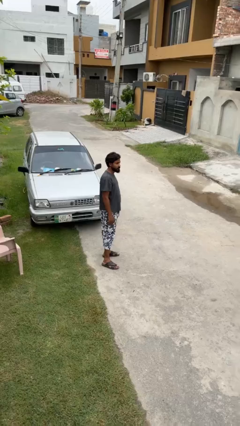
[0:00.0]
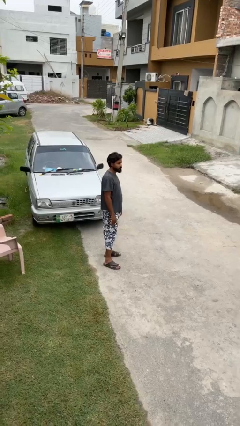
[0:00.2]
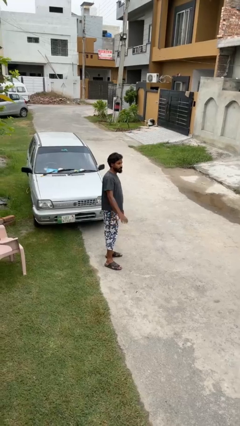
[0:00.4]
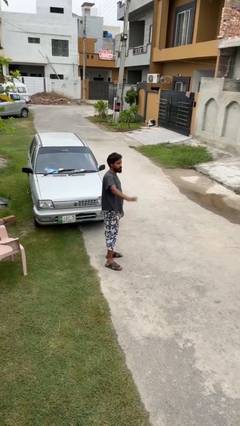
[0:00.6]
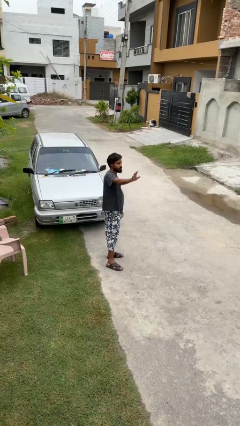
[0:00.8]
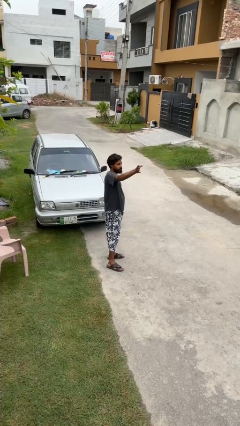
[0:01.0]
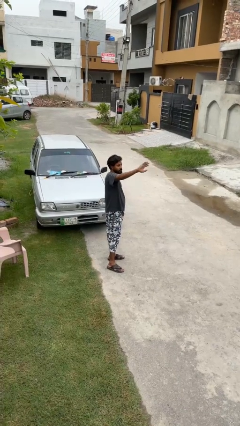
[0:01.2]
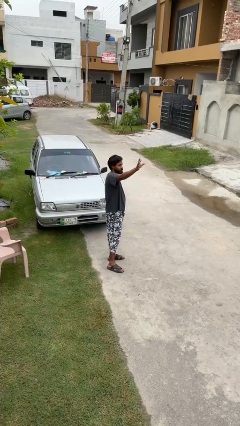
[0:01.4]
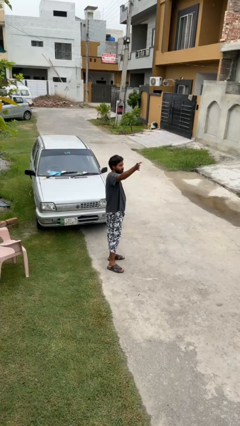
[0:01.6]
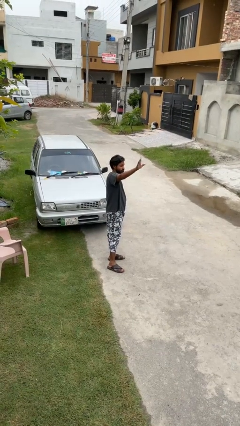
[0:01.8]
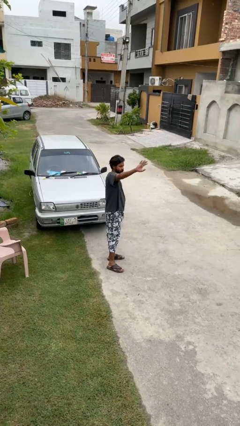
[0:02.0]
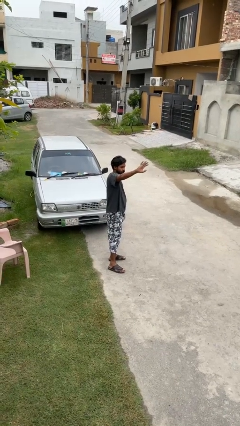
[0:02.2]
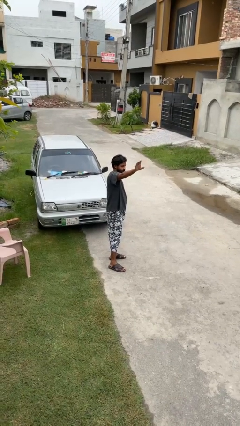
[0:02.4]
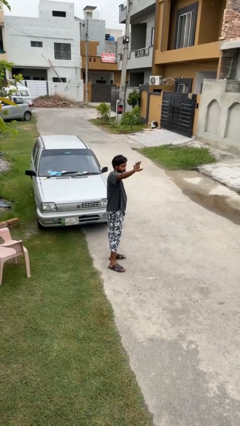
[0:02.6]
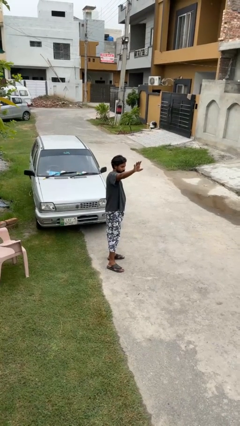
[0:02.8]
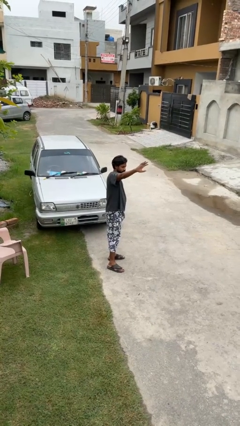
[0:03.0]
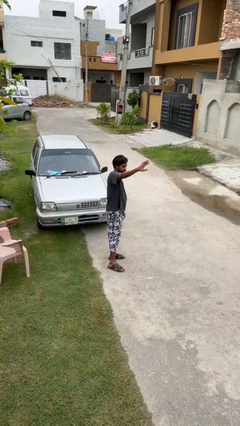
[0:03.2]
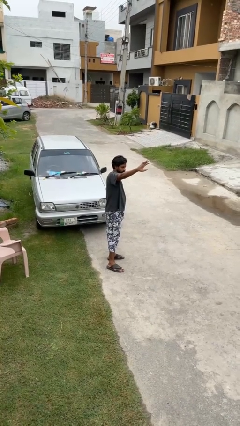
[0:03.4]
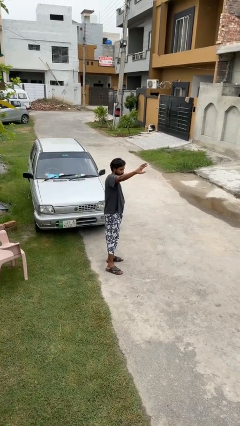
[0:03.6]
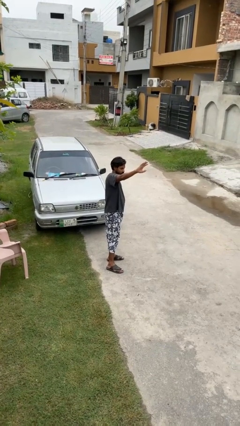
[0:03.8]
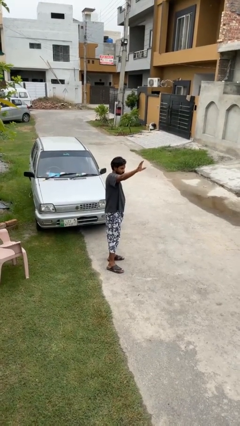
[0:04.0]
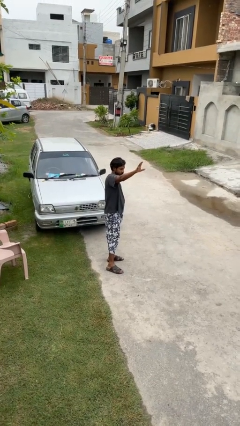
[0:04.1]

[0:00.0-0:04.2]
person waves at person

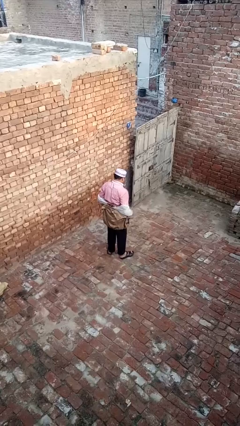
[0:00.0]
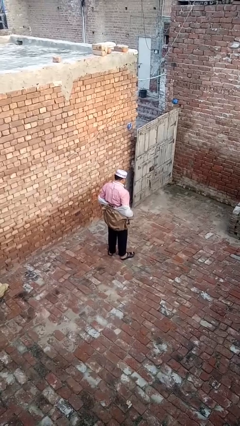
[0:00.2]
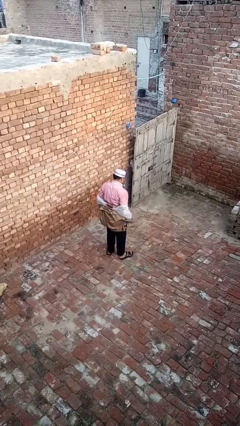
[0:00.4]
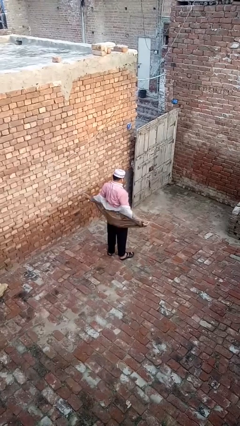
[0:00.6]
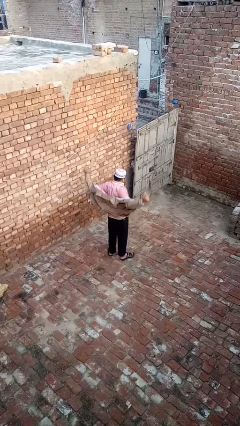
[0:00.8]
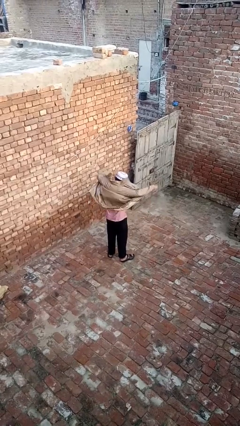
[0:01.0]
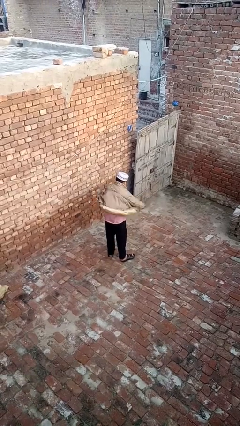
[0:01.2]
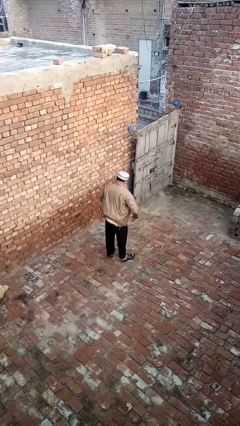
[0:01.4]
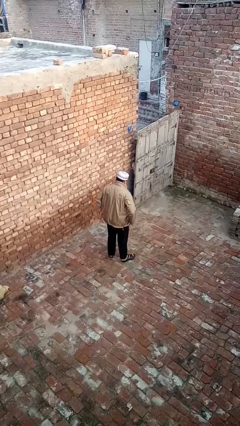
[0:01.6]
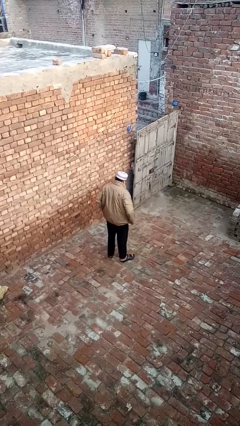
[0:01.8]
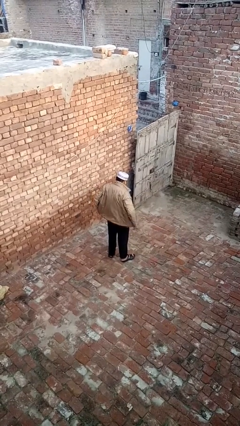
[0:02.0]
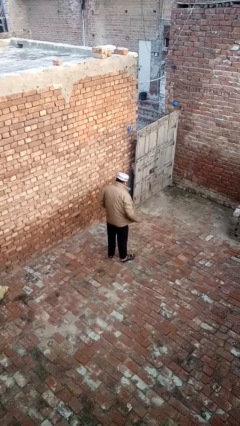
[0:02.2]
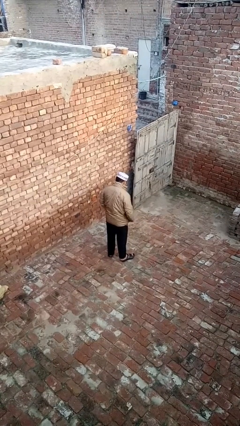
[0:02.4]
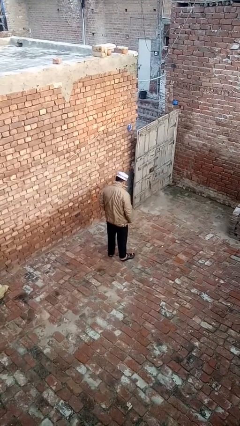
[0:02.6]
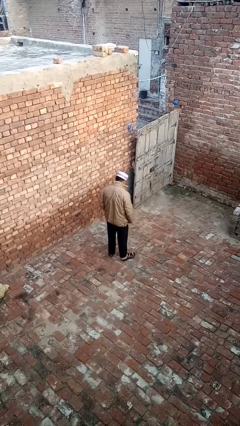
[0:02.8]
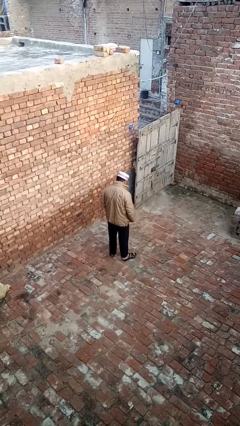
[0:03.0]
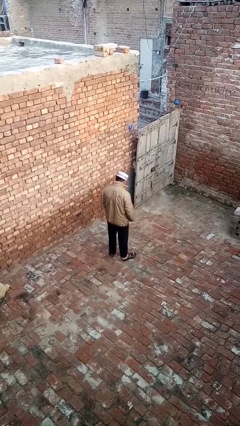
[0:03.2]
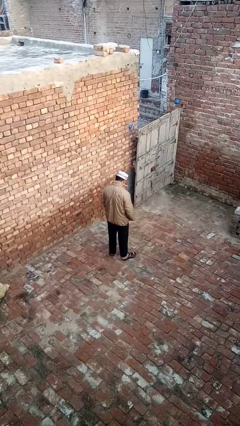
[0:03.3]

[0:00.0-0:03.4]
person puts on jacket

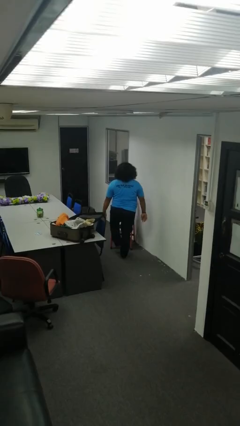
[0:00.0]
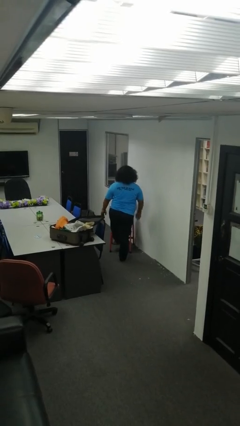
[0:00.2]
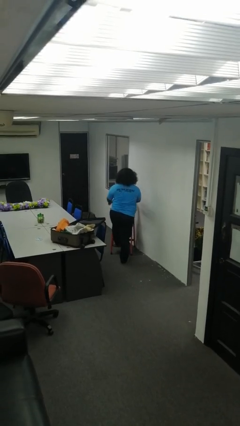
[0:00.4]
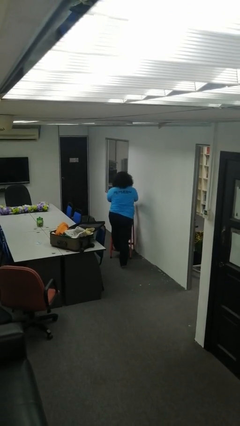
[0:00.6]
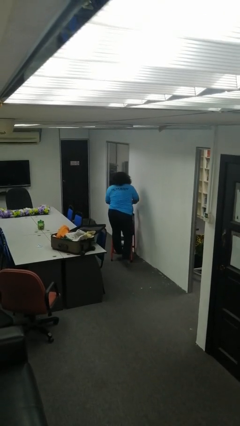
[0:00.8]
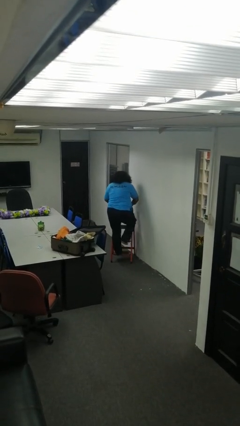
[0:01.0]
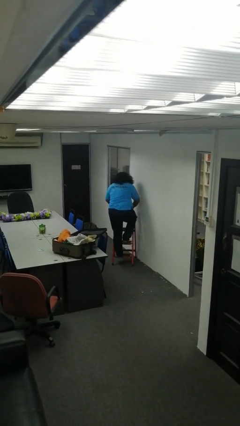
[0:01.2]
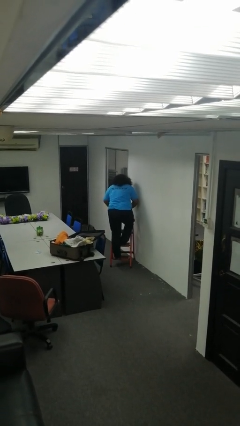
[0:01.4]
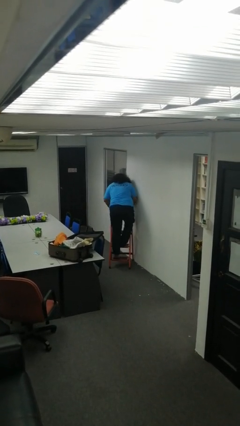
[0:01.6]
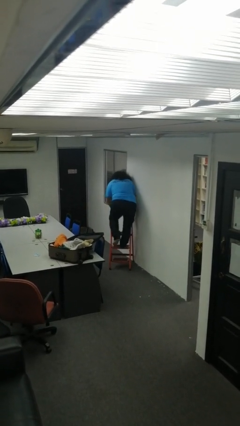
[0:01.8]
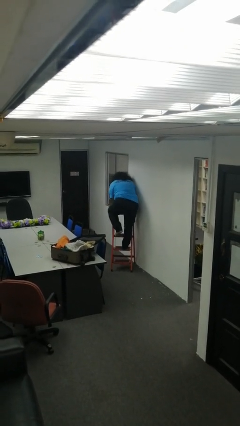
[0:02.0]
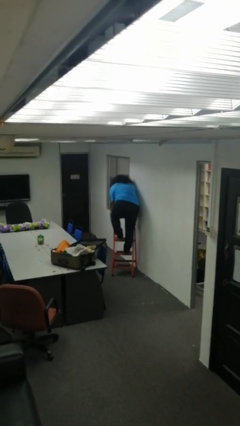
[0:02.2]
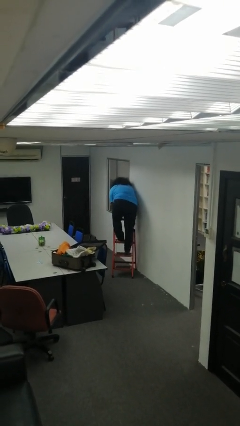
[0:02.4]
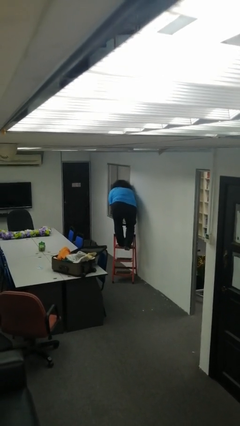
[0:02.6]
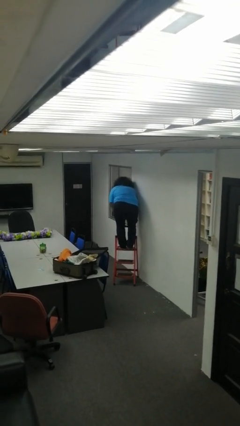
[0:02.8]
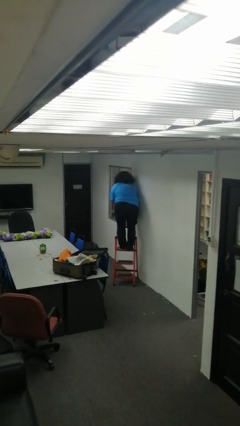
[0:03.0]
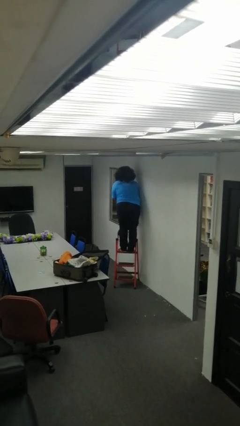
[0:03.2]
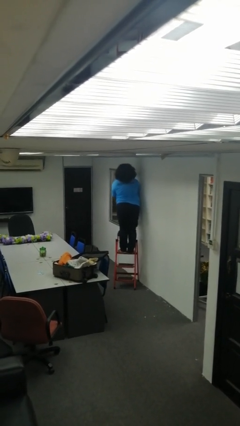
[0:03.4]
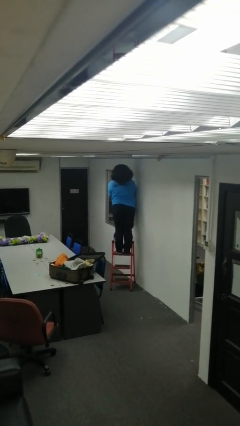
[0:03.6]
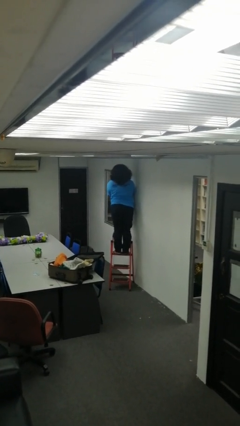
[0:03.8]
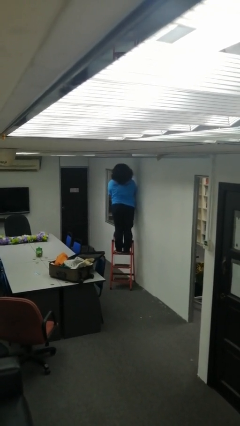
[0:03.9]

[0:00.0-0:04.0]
person climbs up ladder

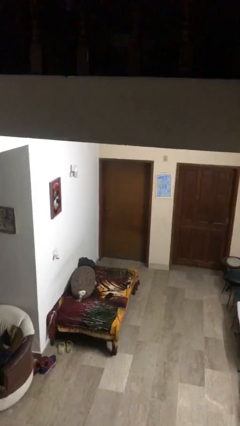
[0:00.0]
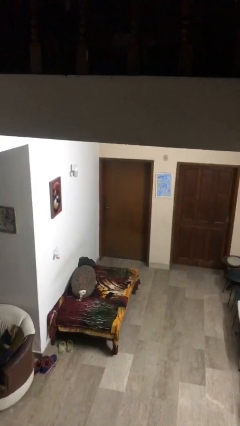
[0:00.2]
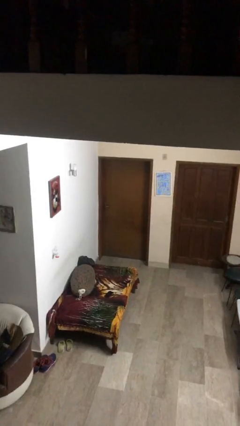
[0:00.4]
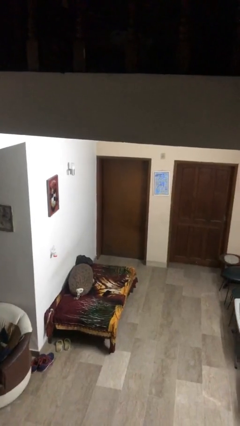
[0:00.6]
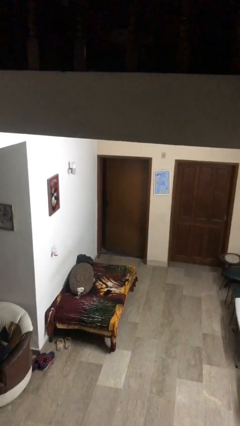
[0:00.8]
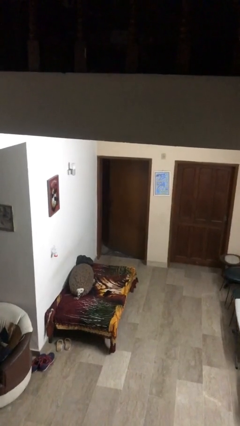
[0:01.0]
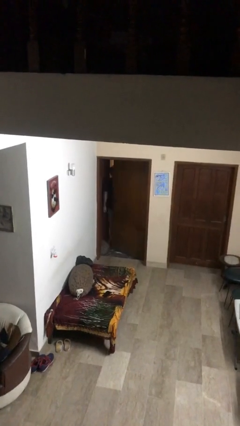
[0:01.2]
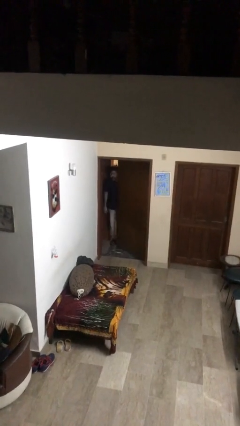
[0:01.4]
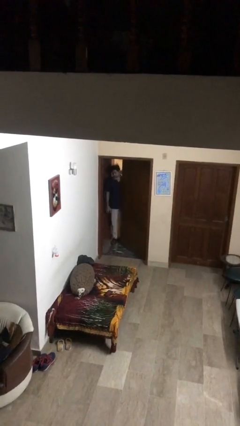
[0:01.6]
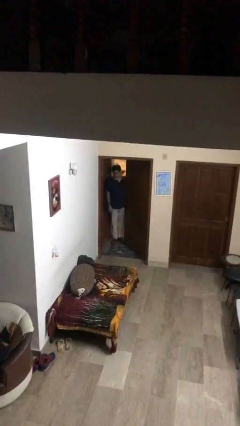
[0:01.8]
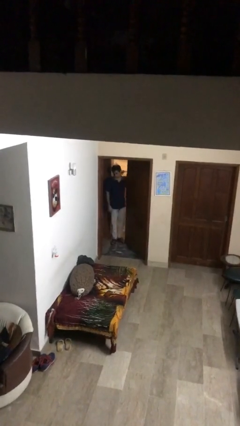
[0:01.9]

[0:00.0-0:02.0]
person opens facility door

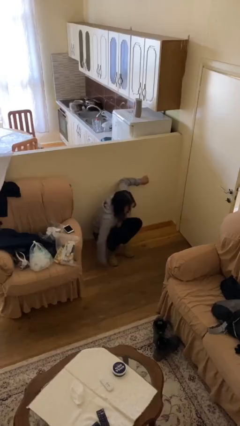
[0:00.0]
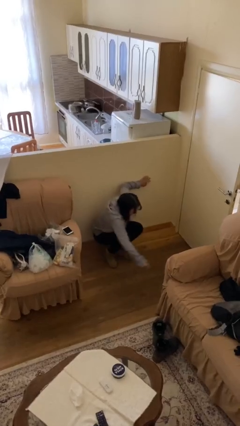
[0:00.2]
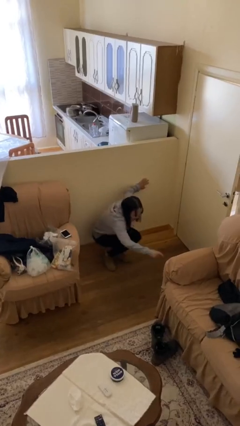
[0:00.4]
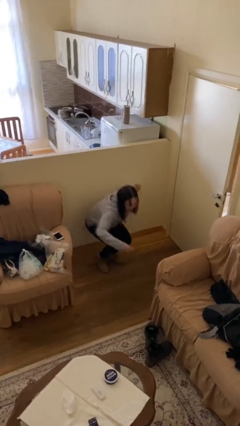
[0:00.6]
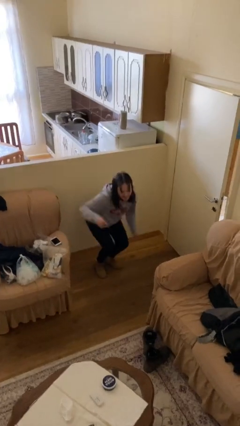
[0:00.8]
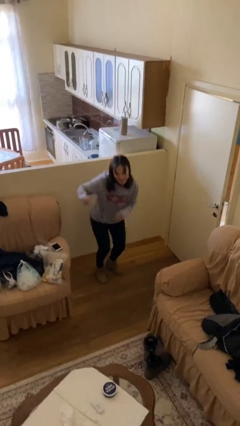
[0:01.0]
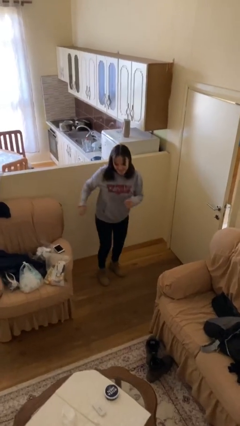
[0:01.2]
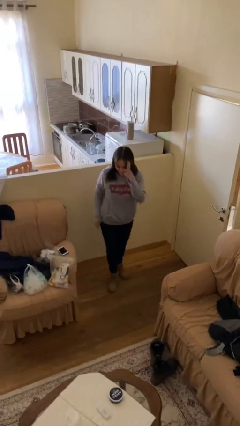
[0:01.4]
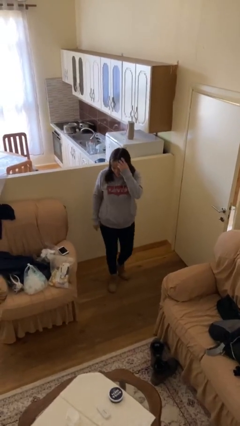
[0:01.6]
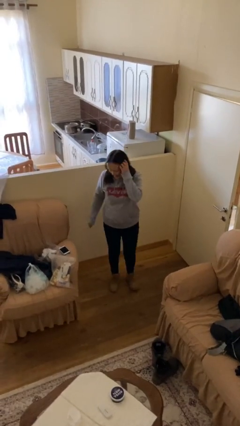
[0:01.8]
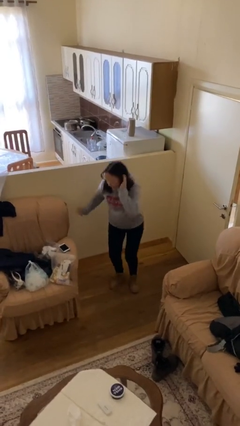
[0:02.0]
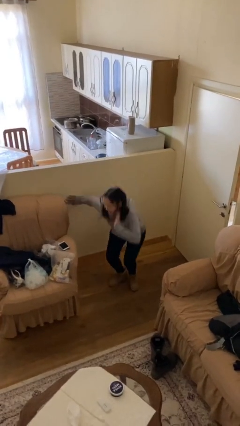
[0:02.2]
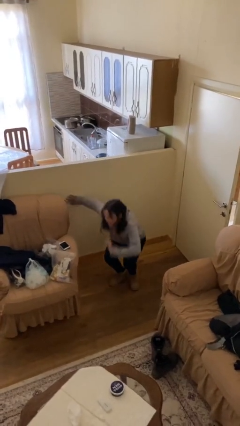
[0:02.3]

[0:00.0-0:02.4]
person stands up

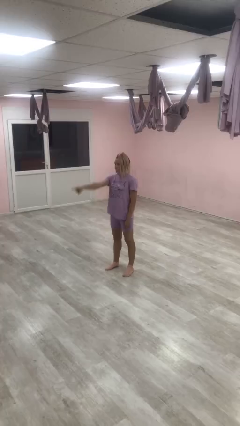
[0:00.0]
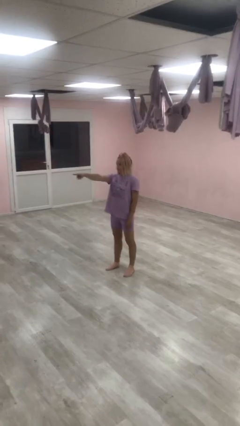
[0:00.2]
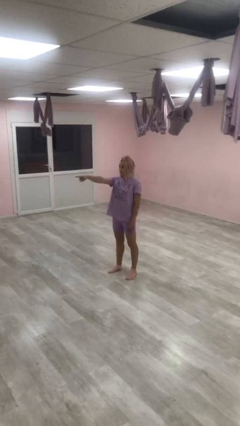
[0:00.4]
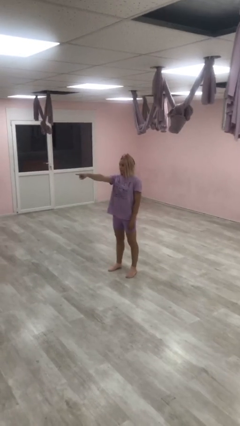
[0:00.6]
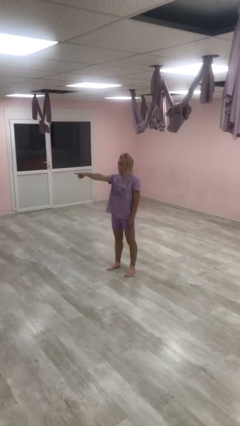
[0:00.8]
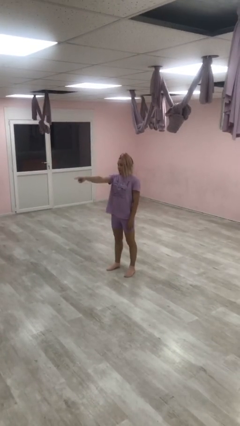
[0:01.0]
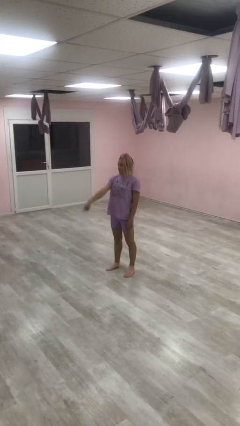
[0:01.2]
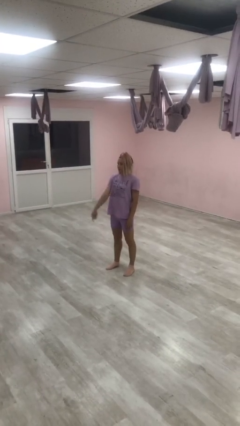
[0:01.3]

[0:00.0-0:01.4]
person points at person
